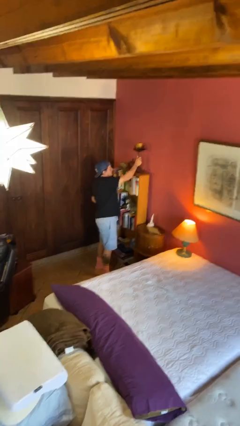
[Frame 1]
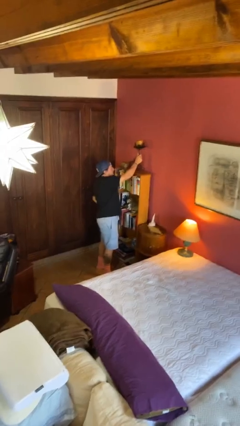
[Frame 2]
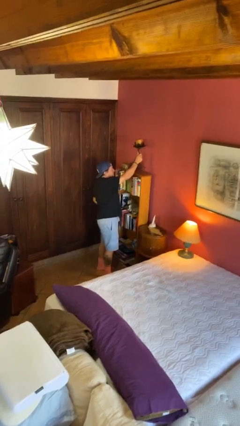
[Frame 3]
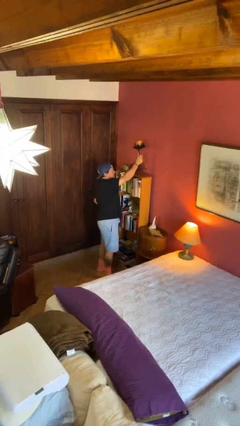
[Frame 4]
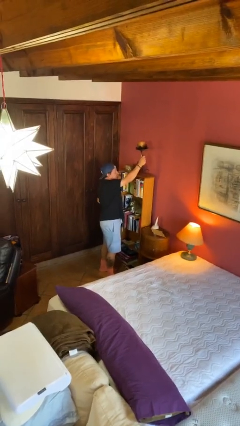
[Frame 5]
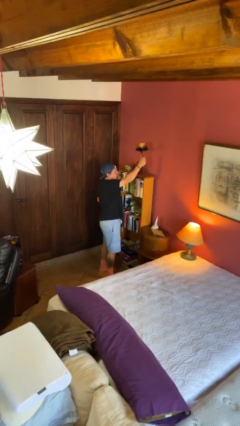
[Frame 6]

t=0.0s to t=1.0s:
person picks up object from shelf

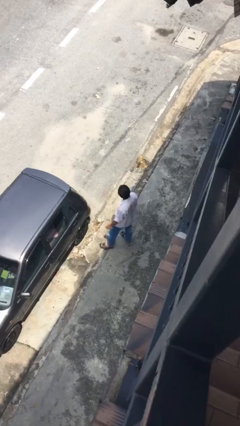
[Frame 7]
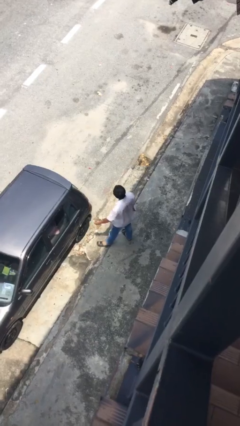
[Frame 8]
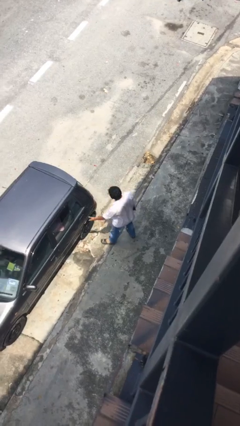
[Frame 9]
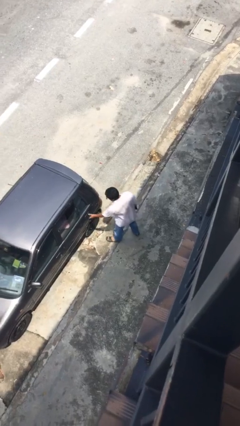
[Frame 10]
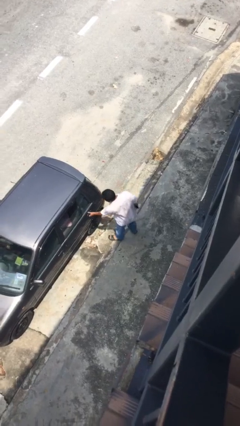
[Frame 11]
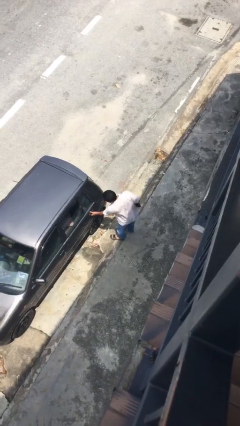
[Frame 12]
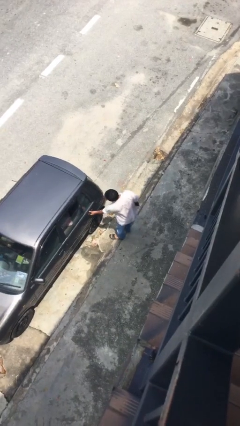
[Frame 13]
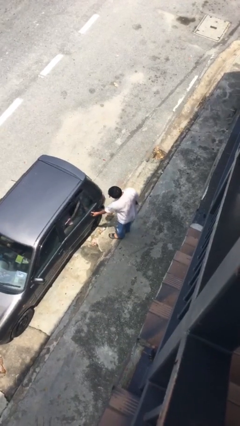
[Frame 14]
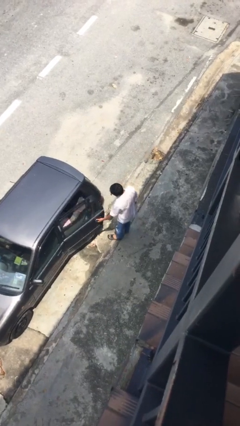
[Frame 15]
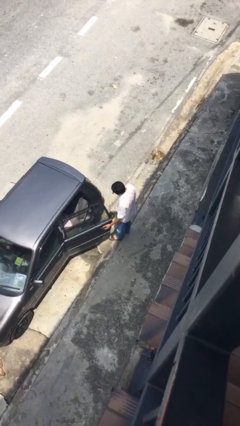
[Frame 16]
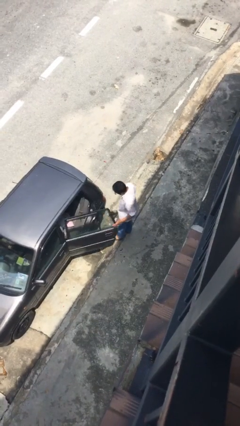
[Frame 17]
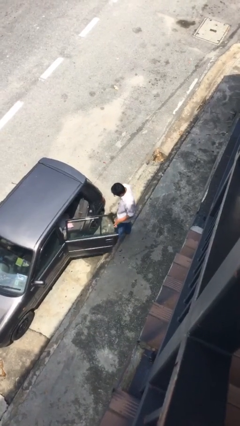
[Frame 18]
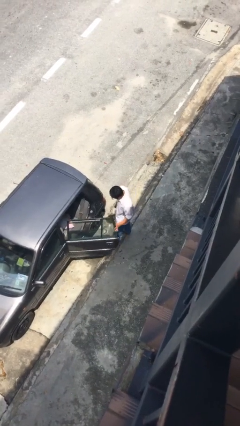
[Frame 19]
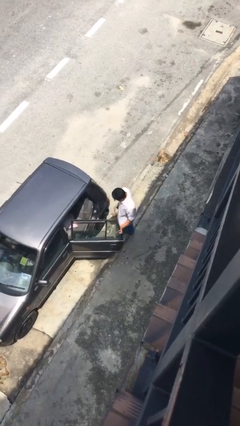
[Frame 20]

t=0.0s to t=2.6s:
person opens car door

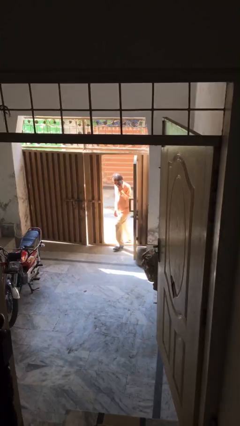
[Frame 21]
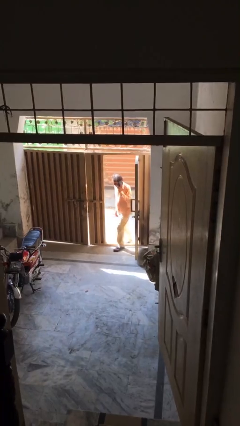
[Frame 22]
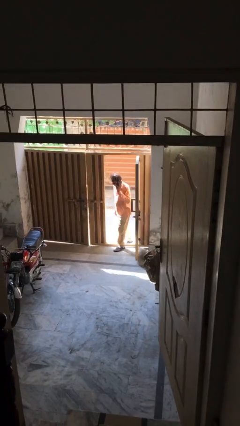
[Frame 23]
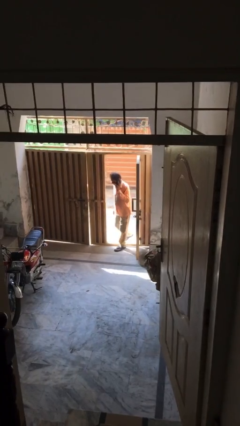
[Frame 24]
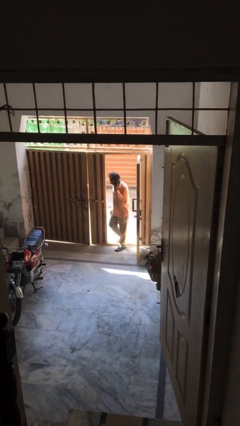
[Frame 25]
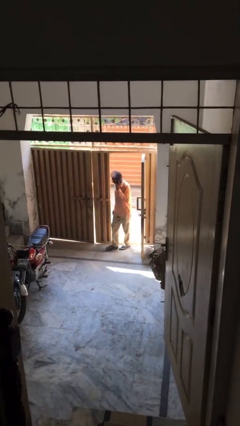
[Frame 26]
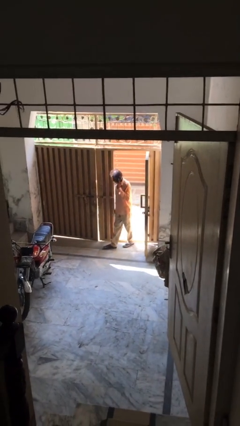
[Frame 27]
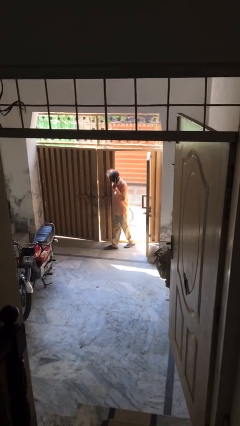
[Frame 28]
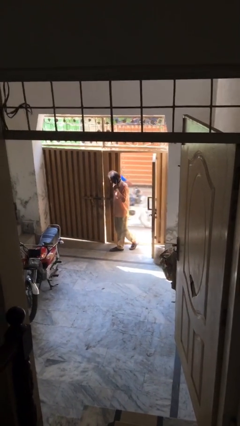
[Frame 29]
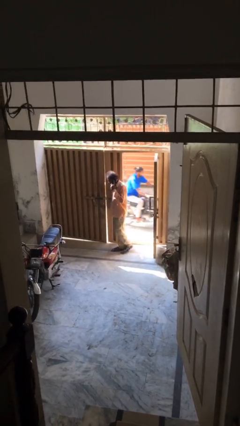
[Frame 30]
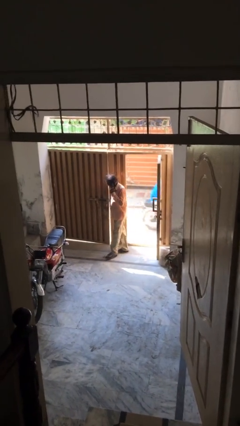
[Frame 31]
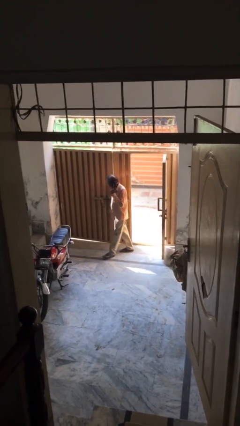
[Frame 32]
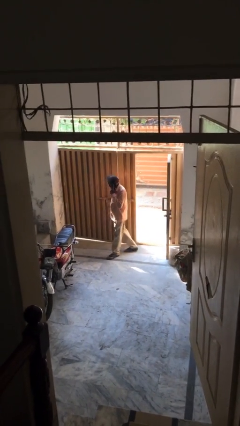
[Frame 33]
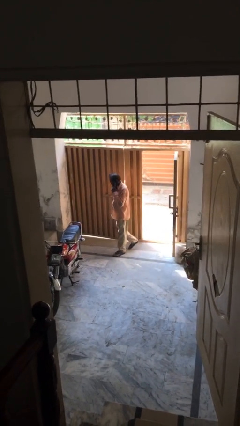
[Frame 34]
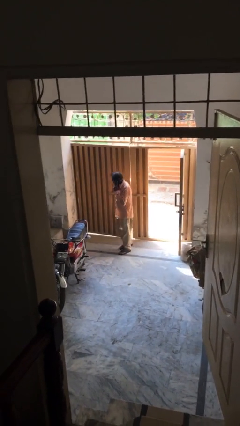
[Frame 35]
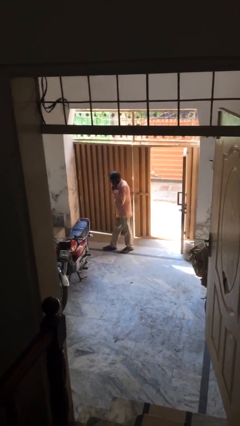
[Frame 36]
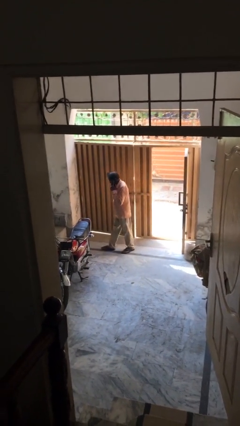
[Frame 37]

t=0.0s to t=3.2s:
person enters scene through structure

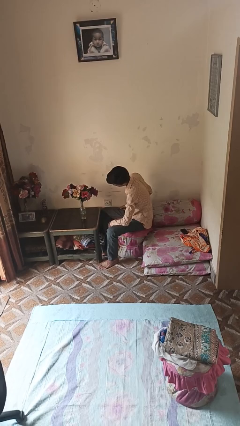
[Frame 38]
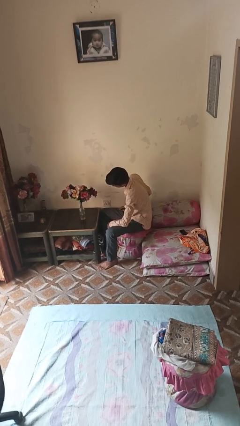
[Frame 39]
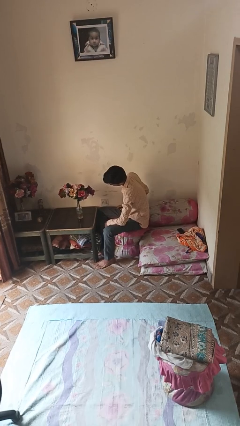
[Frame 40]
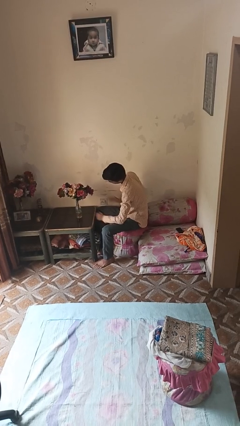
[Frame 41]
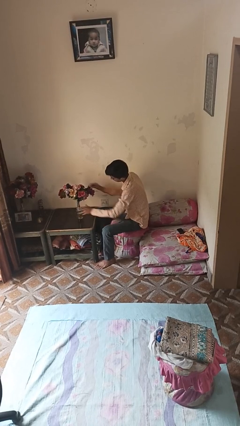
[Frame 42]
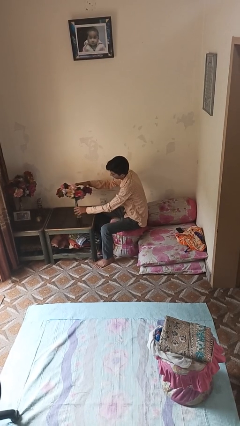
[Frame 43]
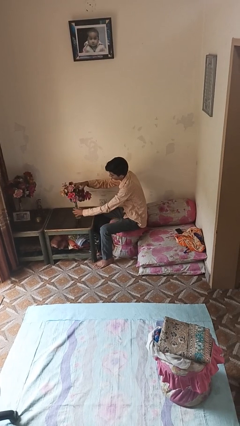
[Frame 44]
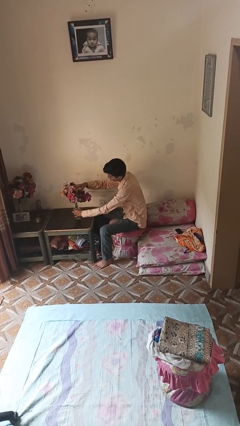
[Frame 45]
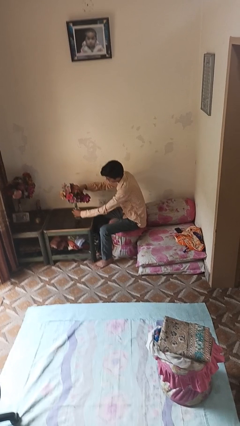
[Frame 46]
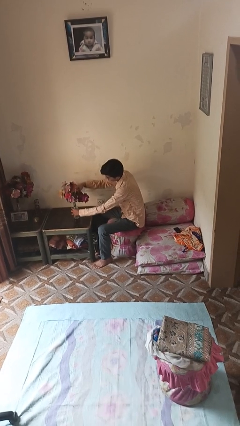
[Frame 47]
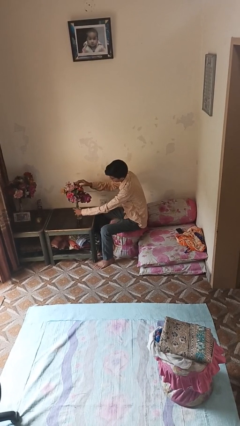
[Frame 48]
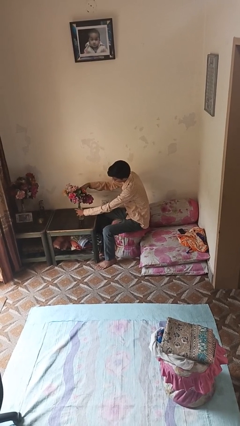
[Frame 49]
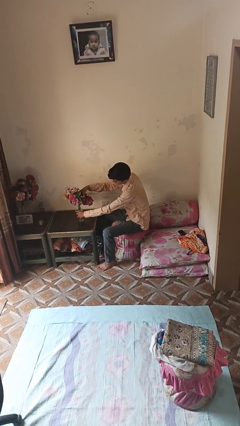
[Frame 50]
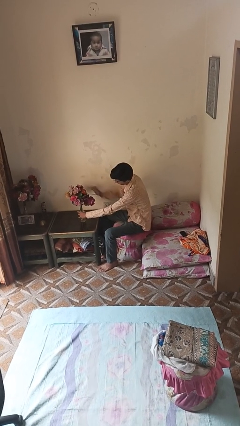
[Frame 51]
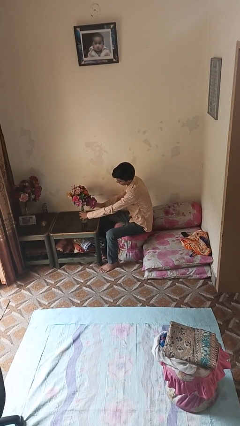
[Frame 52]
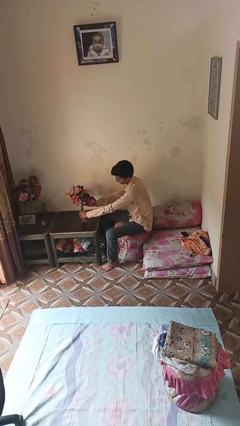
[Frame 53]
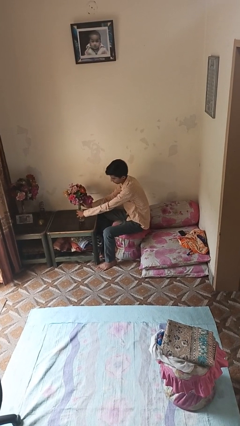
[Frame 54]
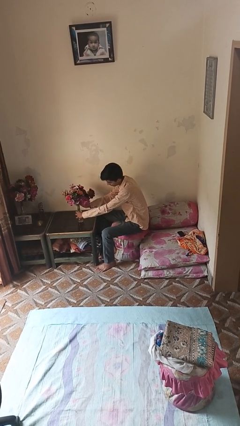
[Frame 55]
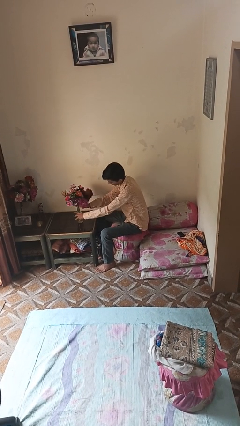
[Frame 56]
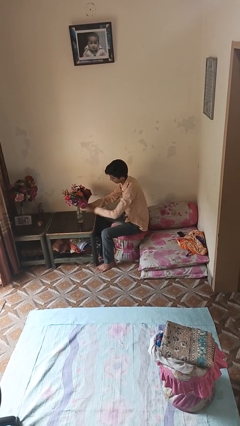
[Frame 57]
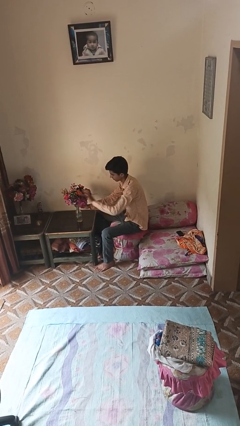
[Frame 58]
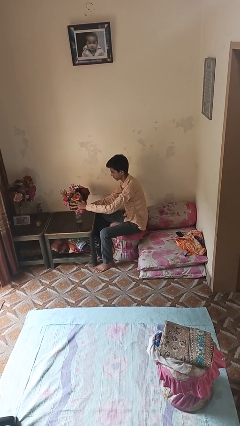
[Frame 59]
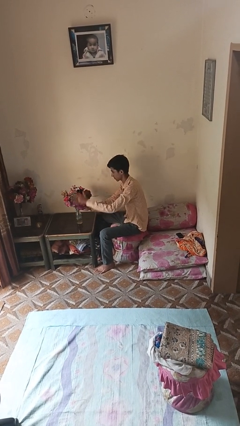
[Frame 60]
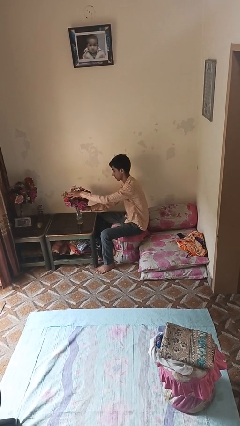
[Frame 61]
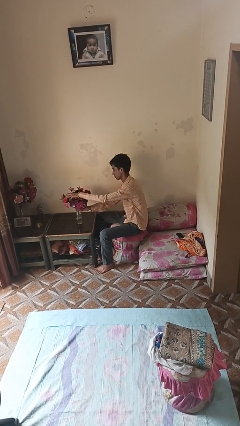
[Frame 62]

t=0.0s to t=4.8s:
person arranges flowers in vase

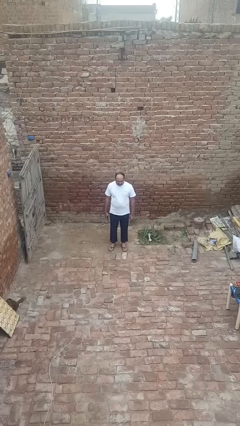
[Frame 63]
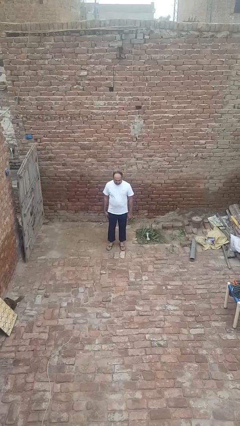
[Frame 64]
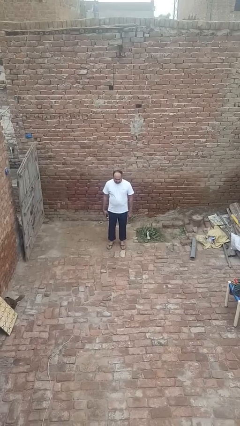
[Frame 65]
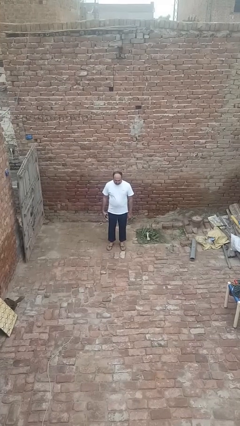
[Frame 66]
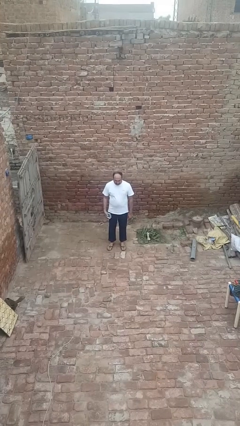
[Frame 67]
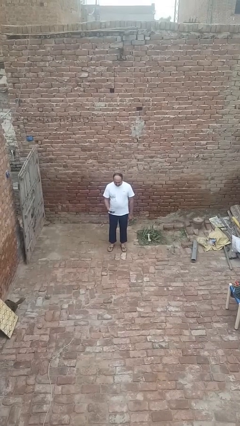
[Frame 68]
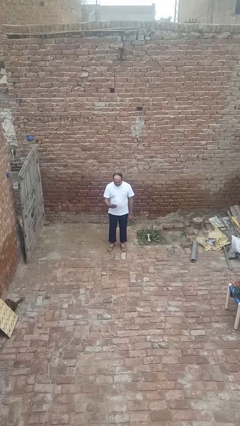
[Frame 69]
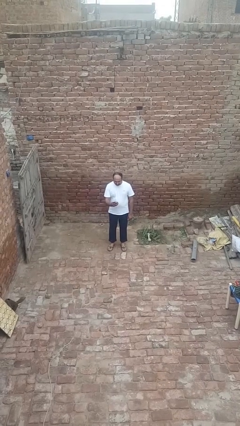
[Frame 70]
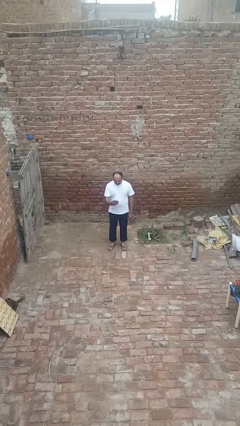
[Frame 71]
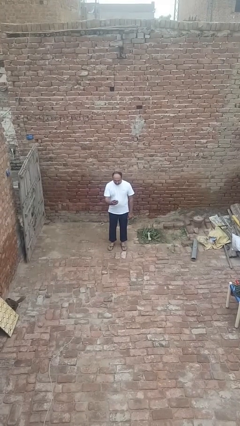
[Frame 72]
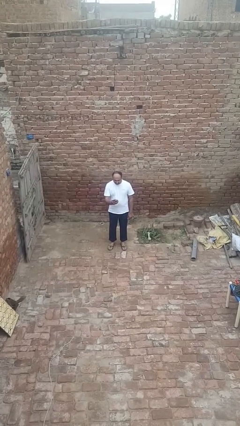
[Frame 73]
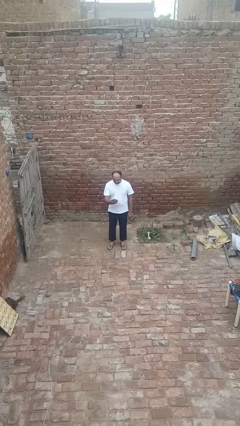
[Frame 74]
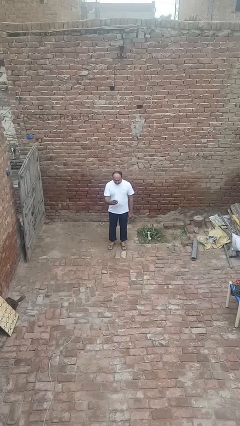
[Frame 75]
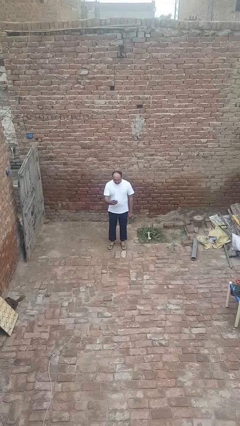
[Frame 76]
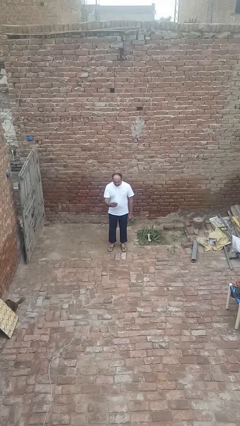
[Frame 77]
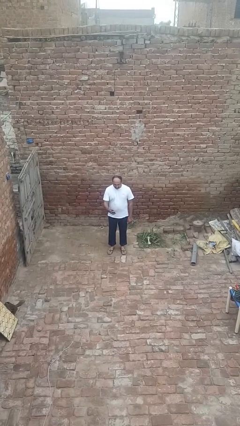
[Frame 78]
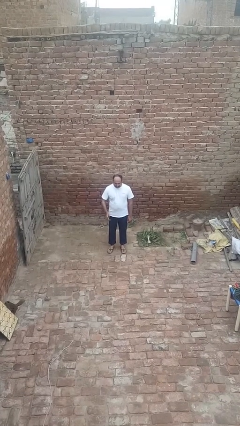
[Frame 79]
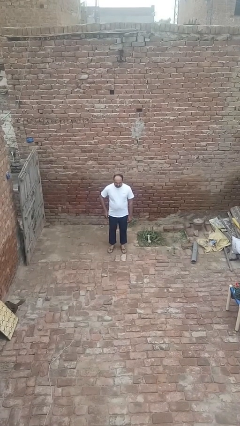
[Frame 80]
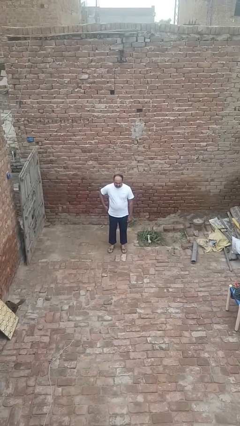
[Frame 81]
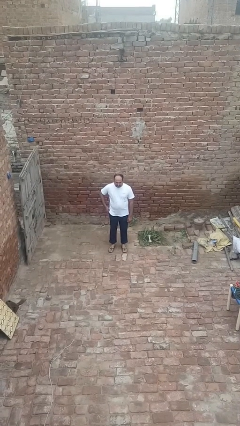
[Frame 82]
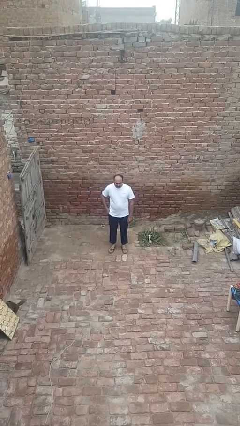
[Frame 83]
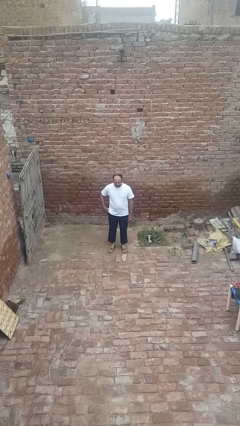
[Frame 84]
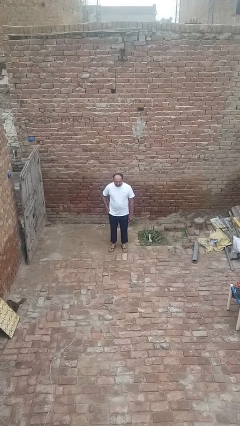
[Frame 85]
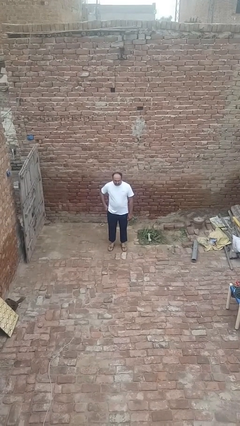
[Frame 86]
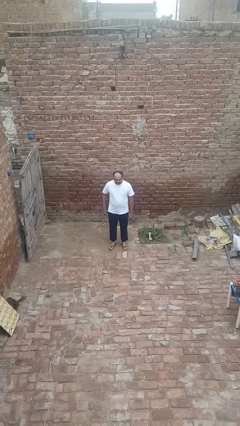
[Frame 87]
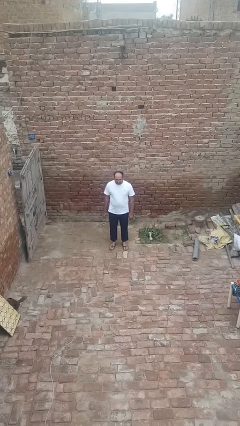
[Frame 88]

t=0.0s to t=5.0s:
person puts phone into pocket

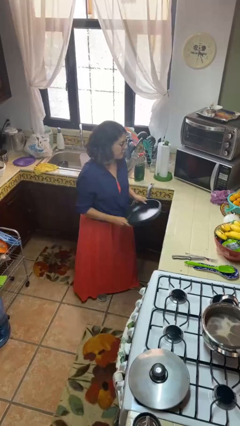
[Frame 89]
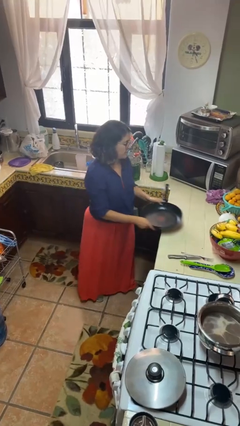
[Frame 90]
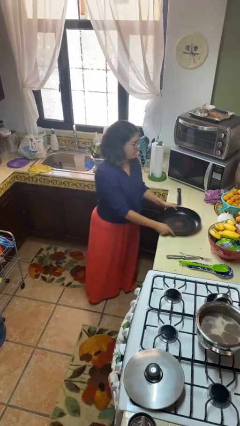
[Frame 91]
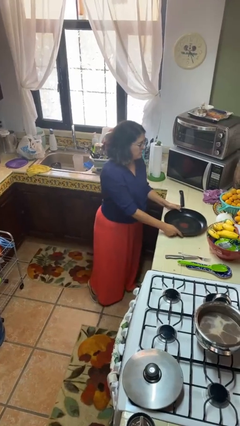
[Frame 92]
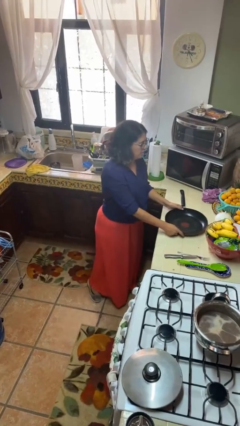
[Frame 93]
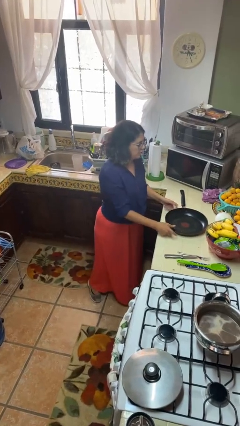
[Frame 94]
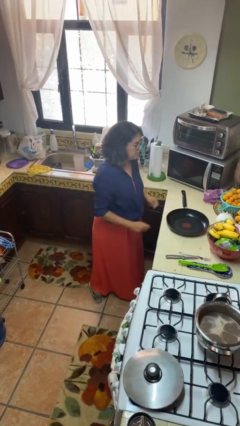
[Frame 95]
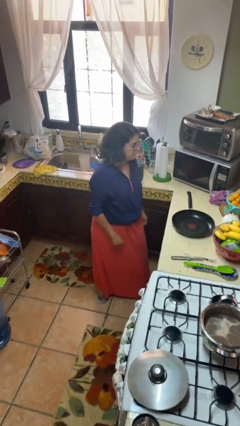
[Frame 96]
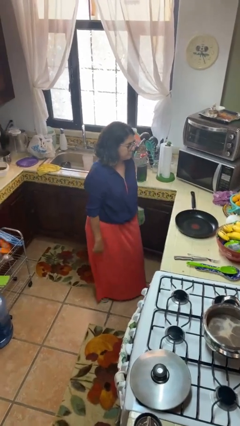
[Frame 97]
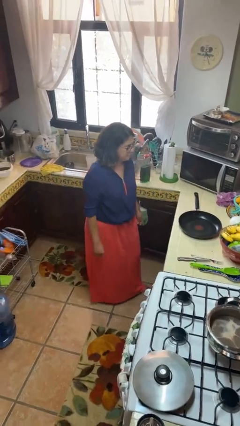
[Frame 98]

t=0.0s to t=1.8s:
person puts down object on countertop
